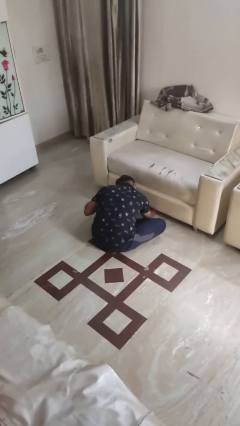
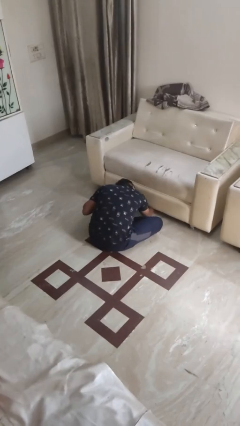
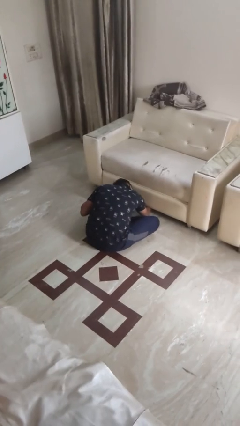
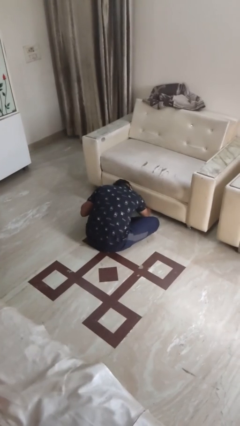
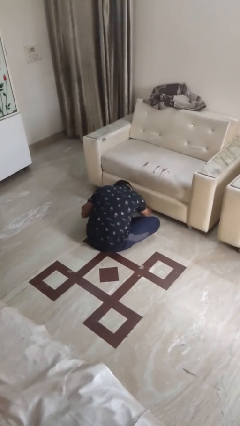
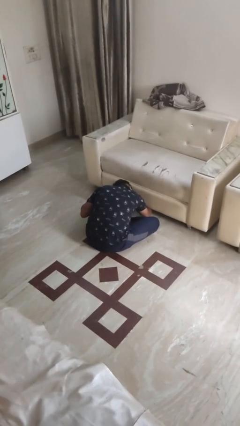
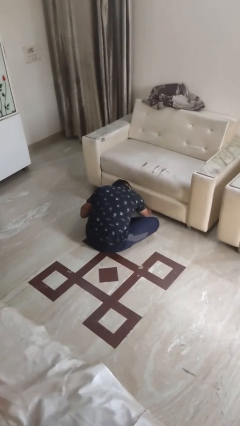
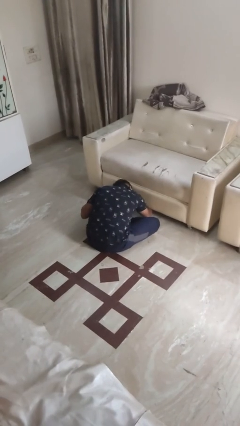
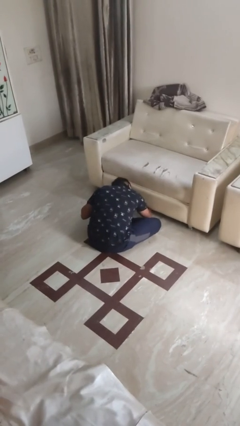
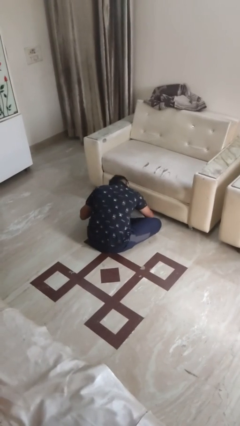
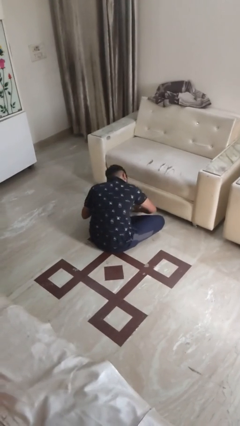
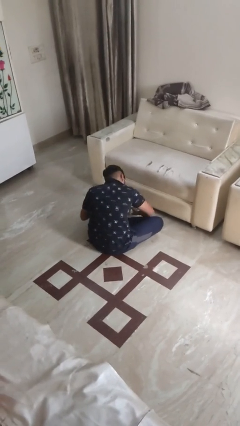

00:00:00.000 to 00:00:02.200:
person searches under couch

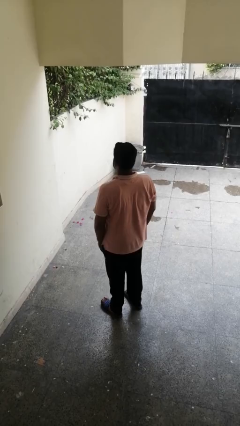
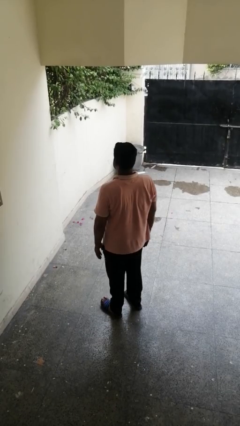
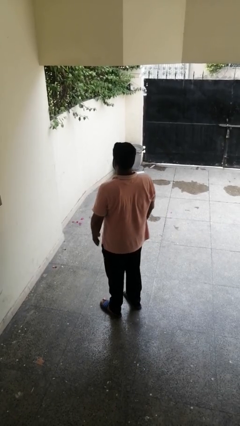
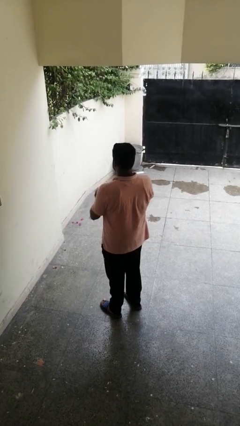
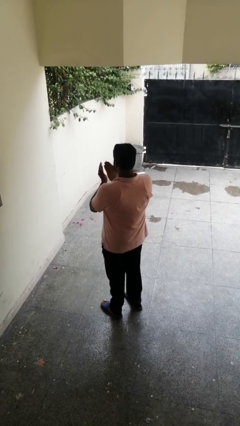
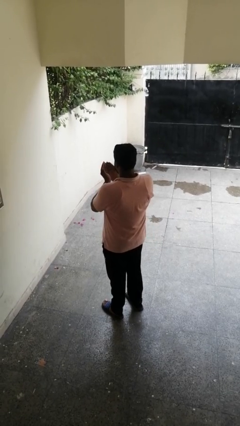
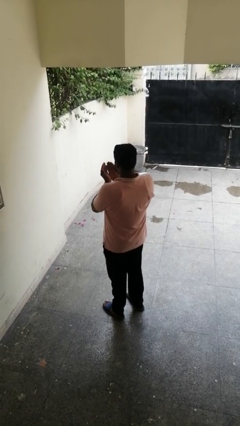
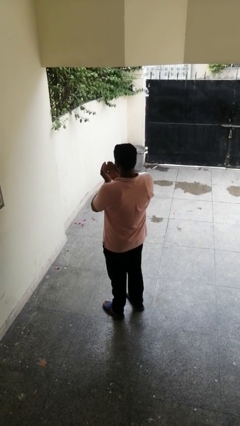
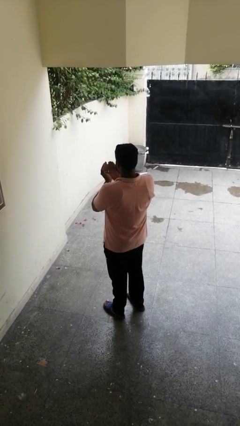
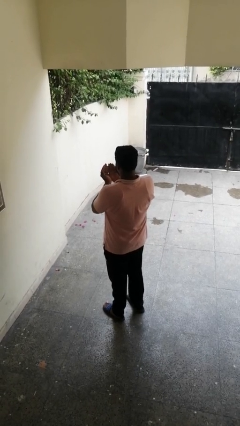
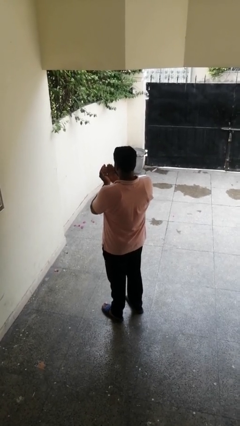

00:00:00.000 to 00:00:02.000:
person prays

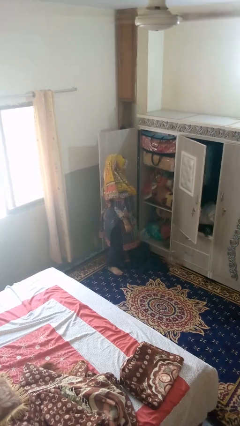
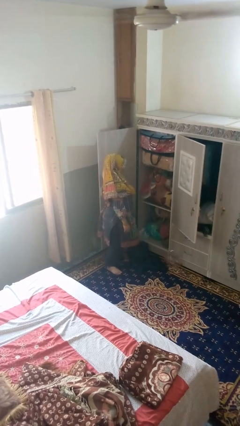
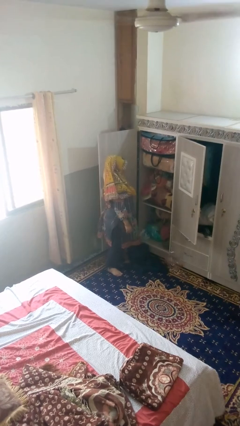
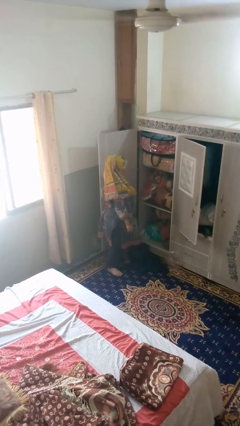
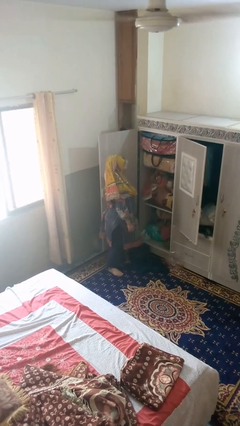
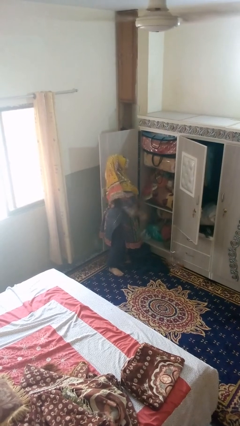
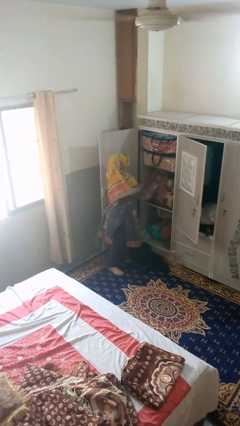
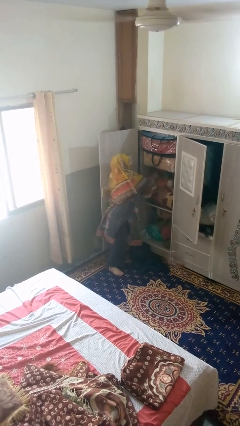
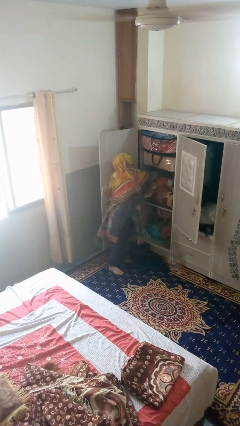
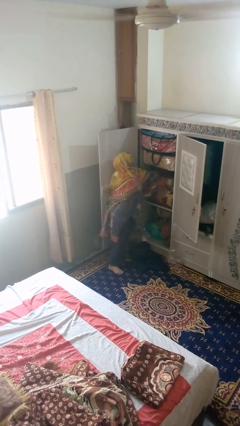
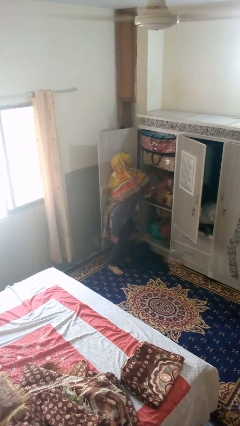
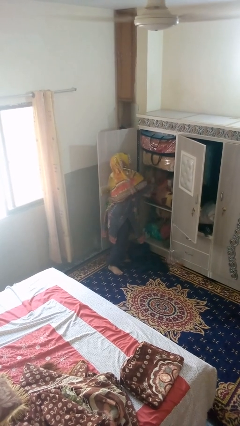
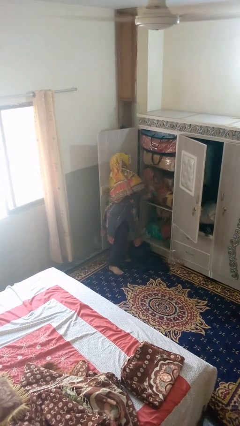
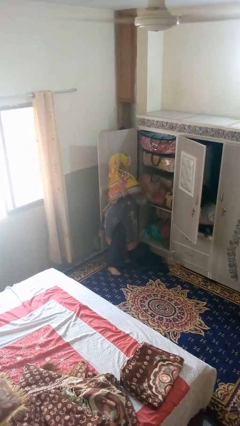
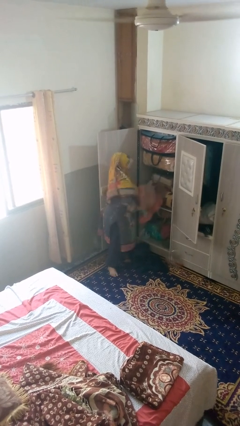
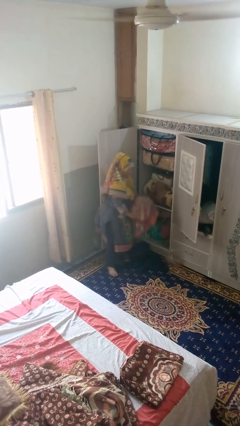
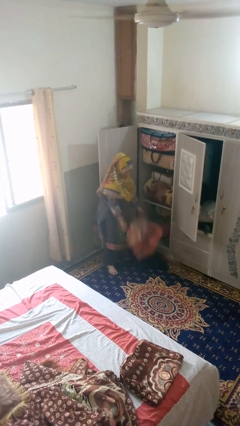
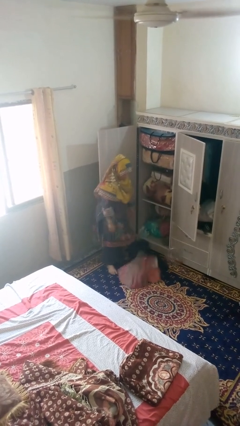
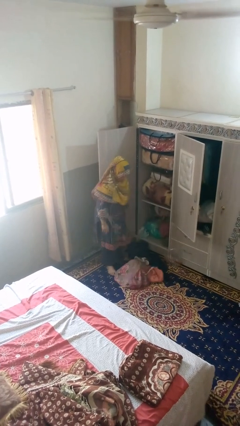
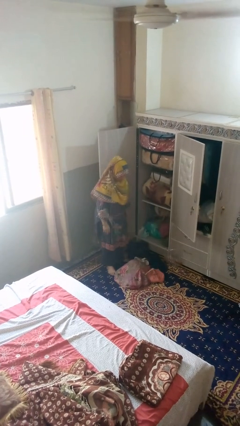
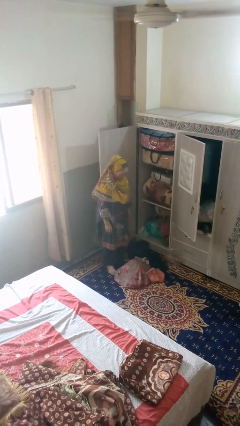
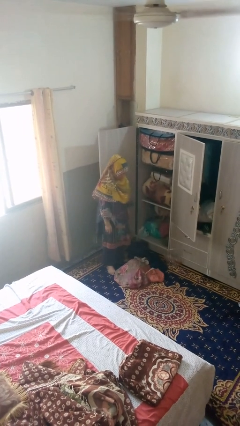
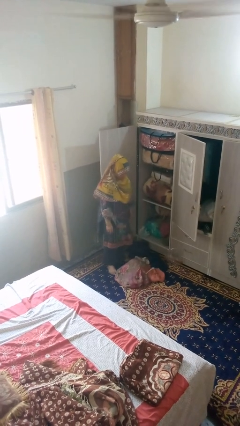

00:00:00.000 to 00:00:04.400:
person puts clothes into dresser

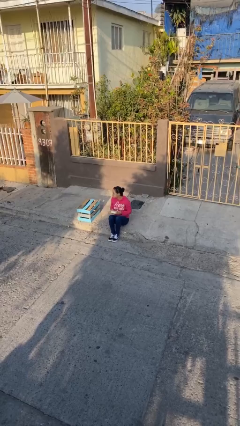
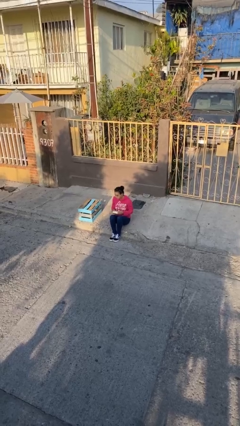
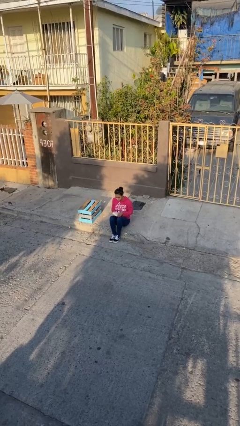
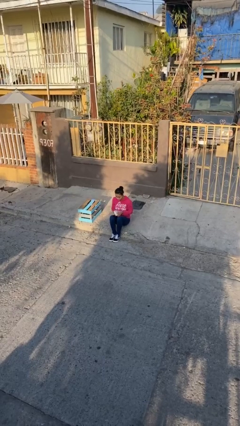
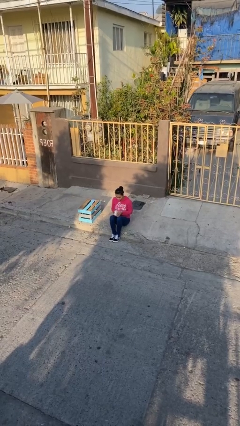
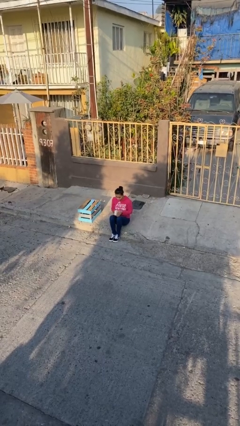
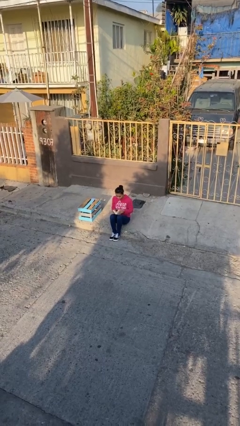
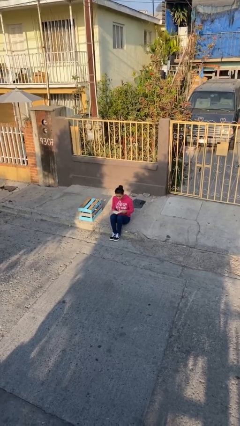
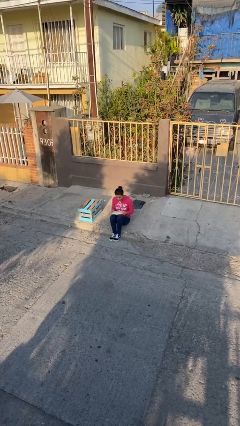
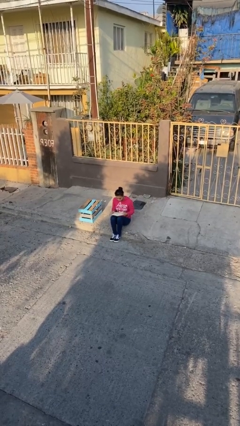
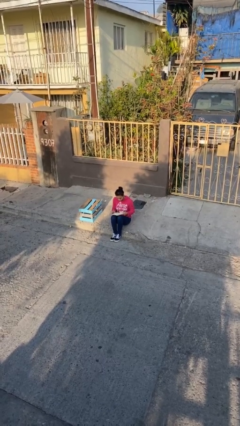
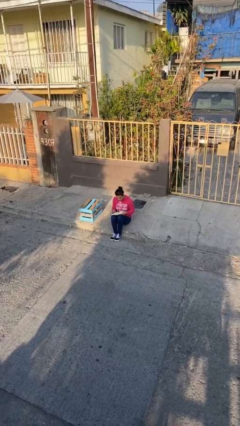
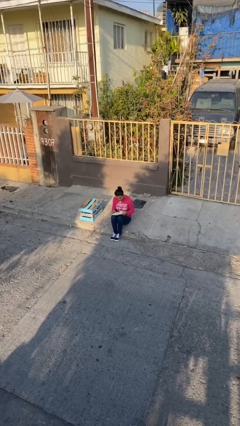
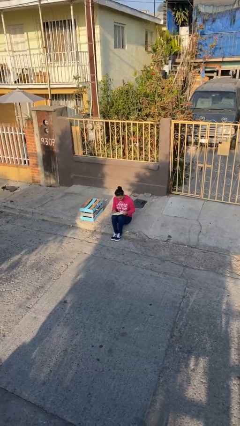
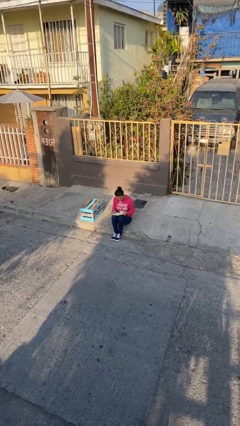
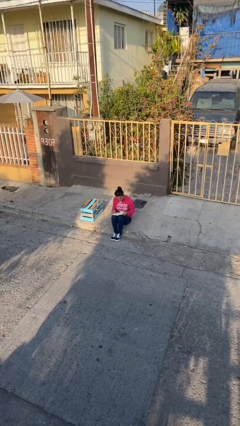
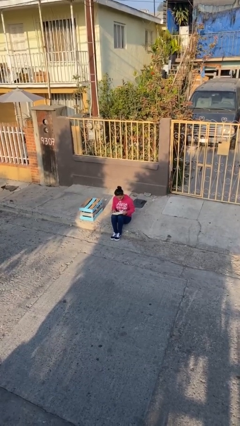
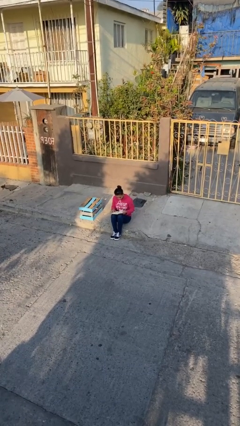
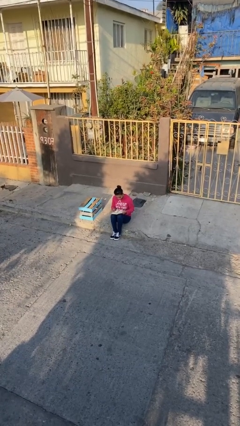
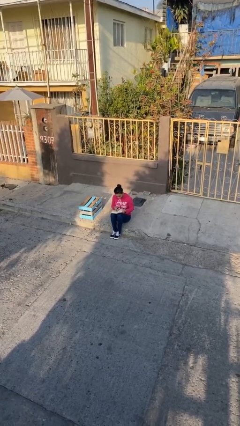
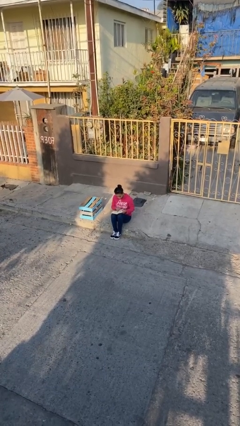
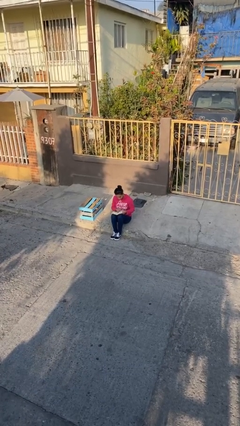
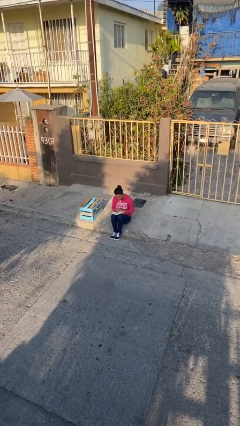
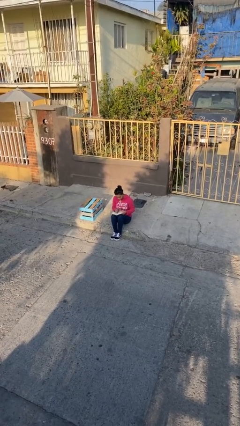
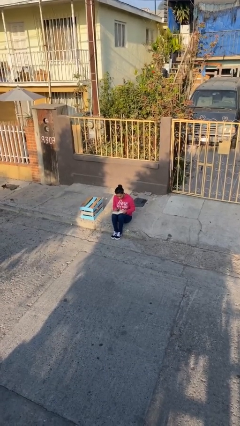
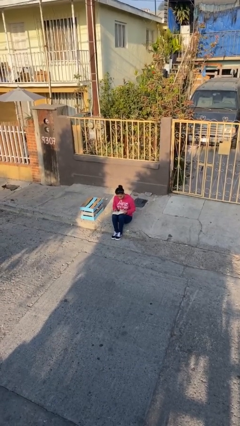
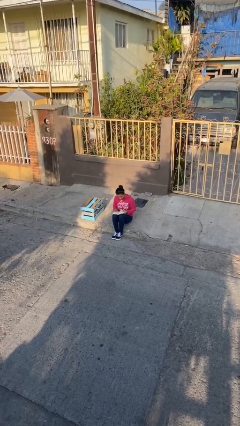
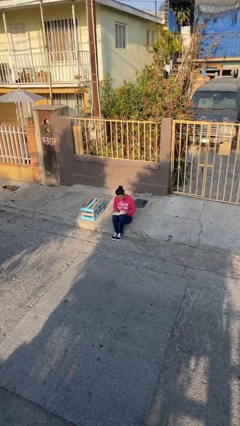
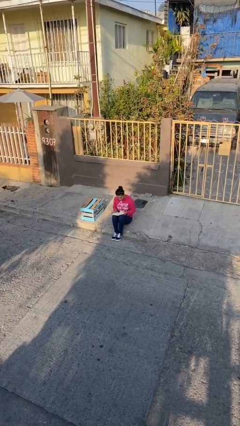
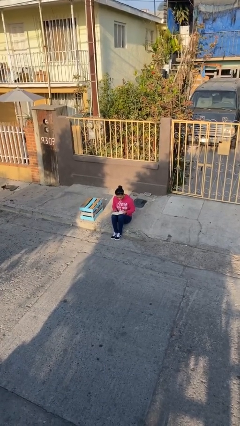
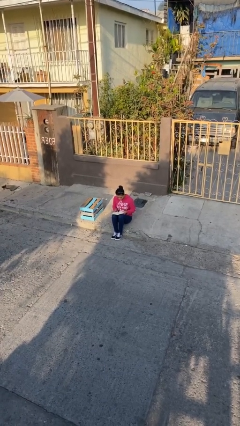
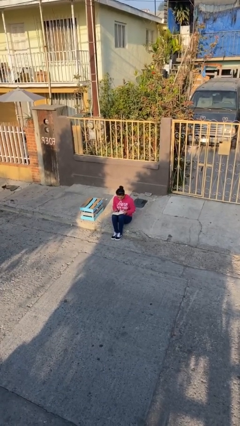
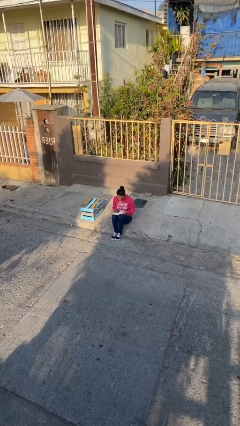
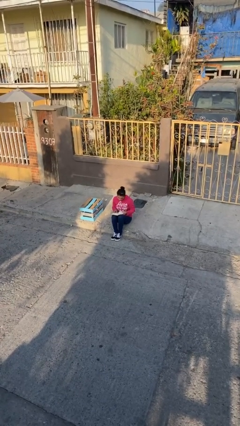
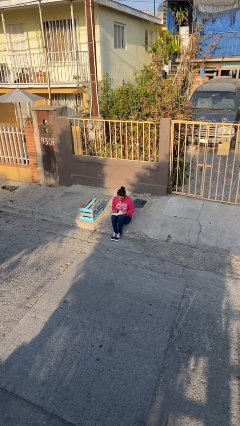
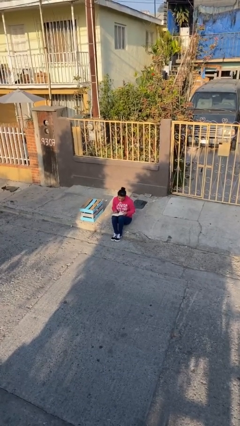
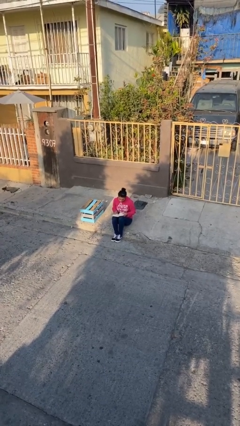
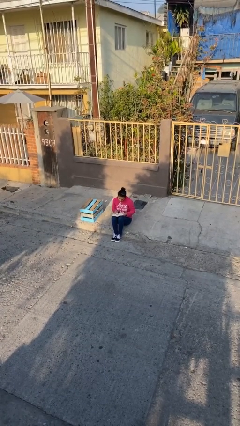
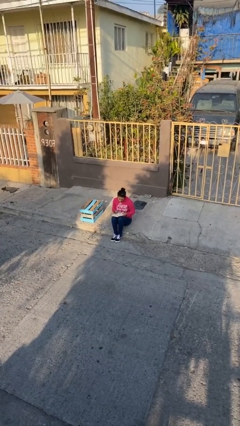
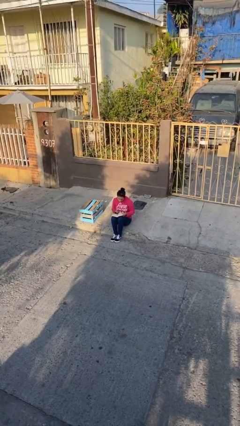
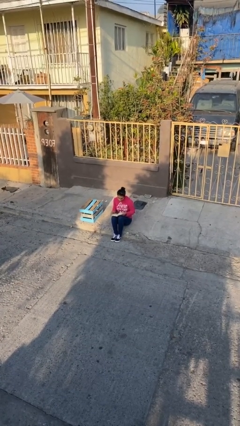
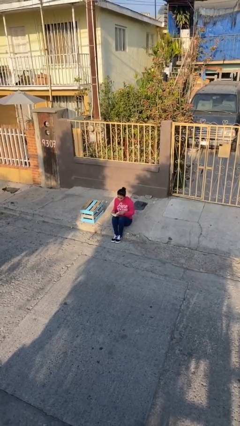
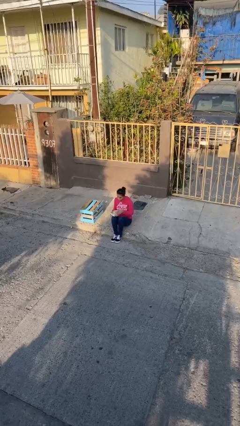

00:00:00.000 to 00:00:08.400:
person reads document

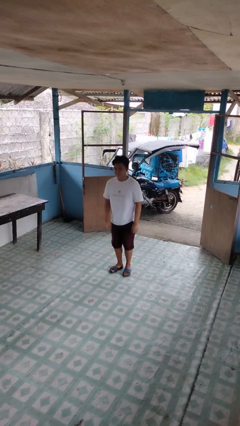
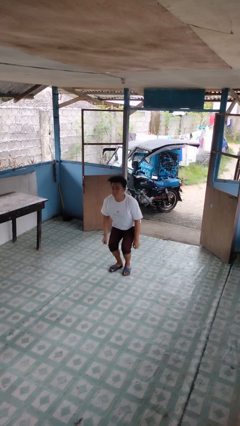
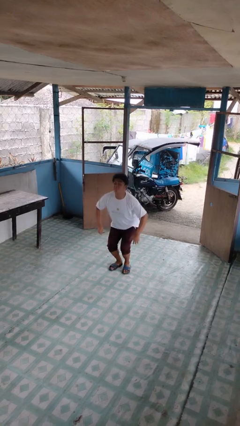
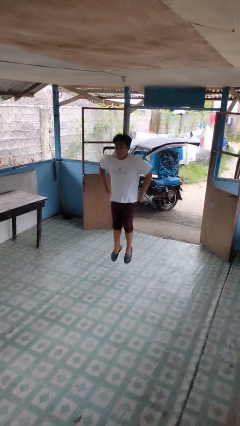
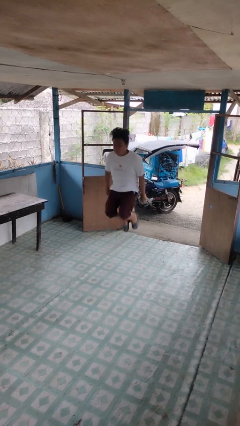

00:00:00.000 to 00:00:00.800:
person jumps
